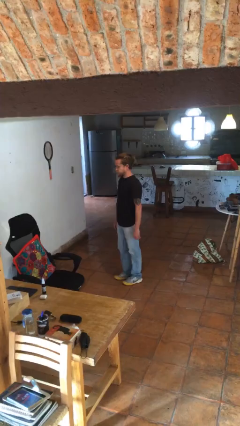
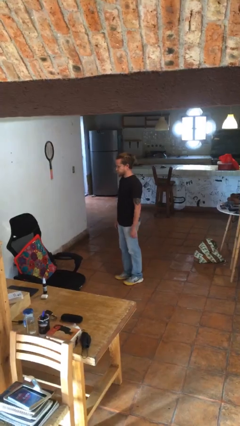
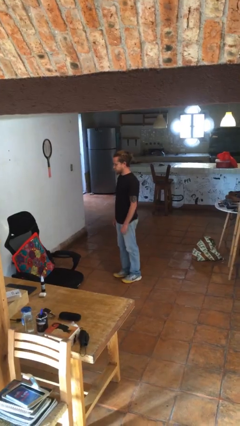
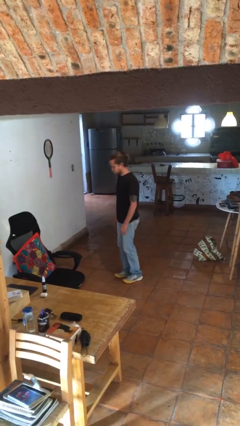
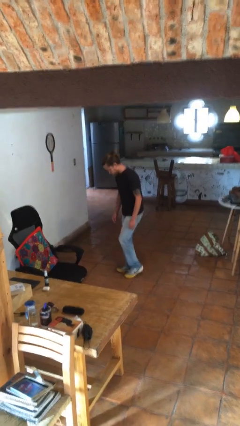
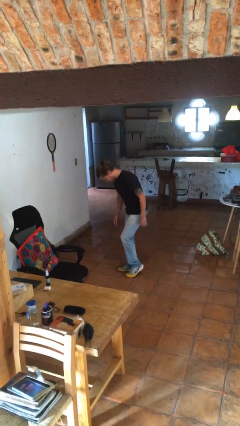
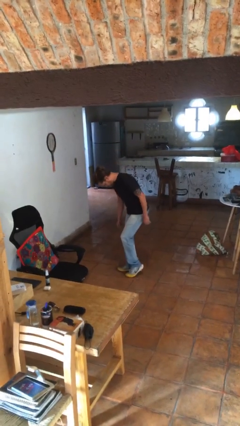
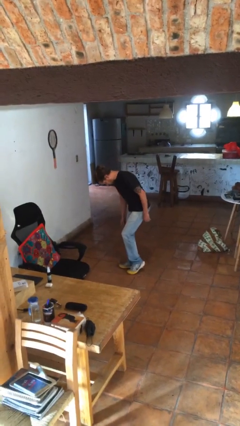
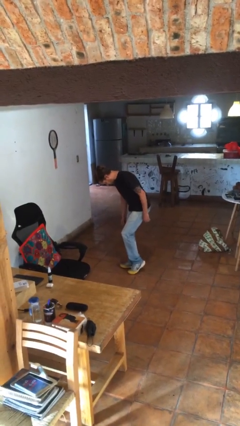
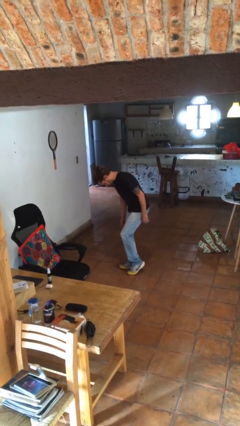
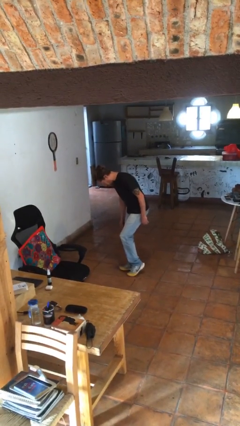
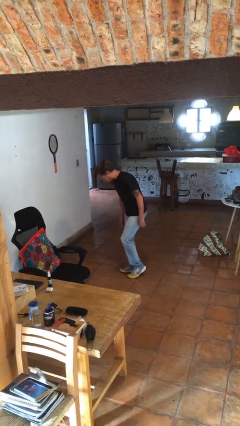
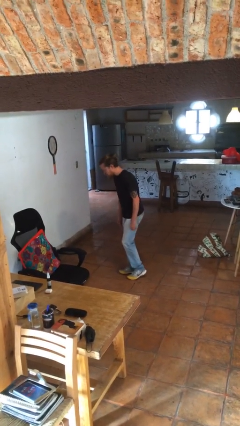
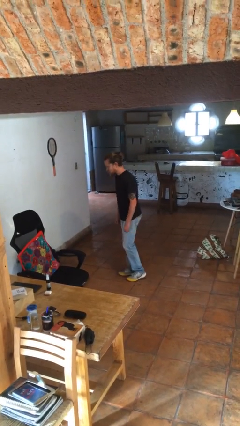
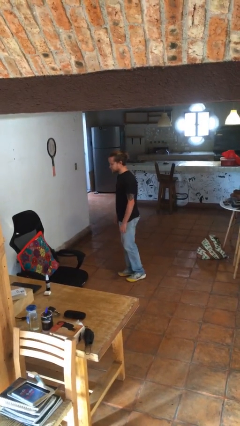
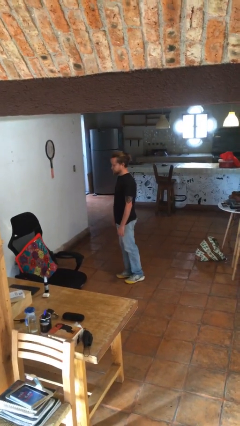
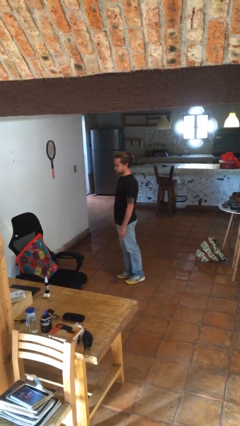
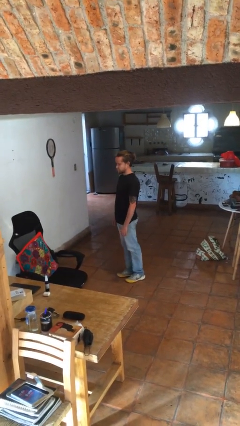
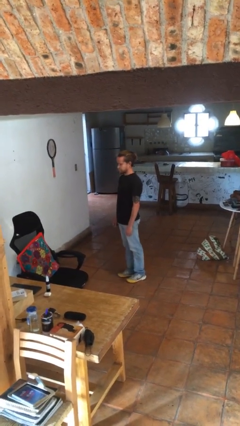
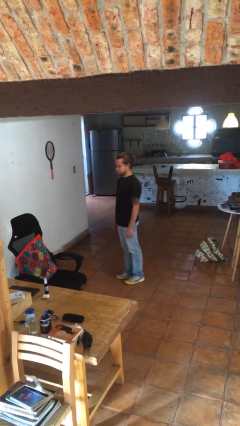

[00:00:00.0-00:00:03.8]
person bows

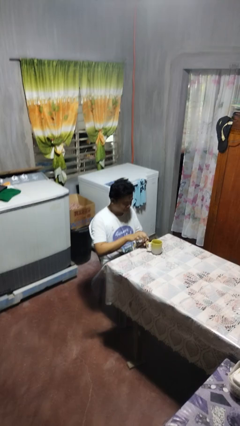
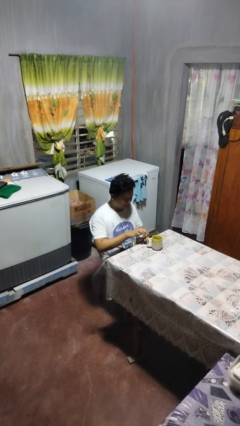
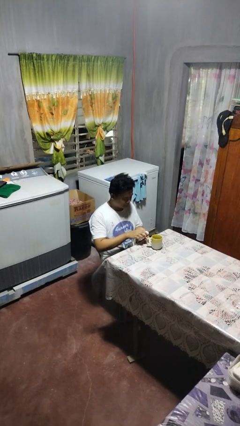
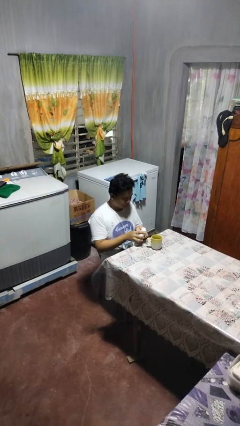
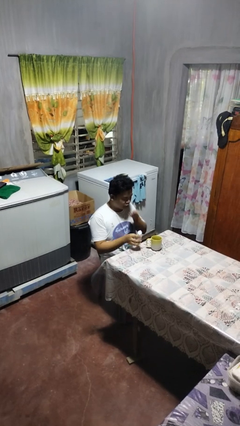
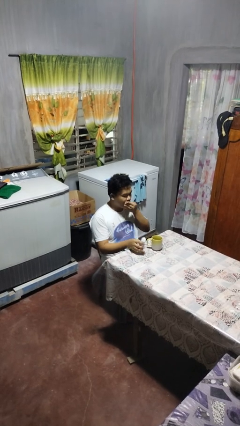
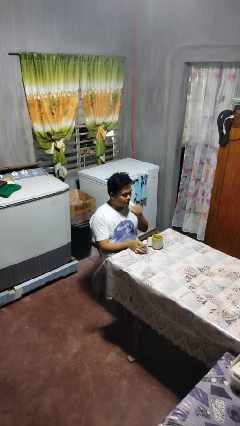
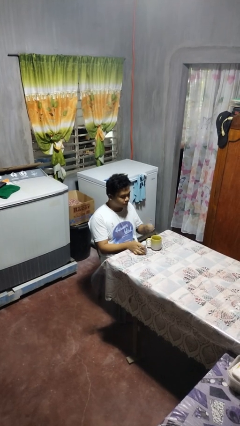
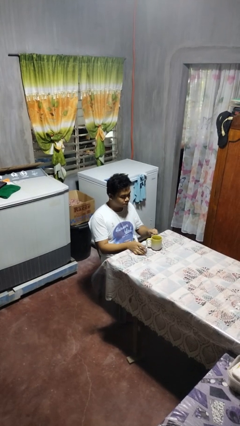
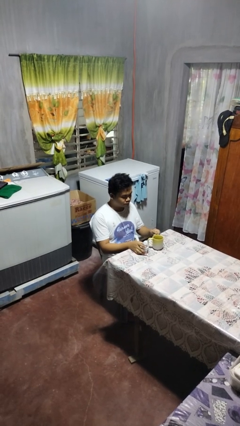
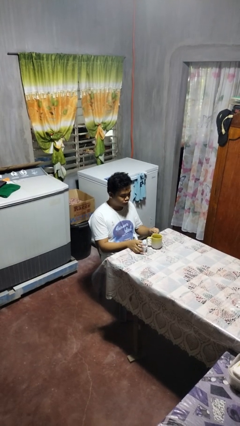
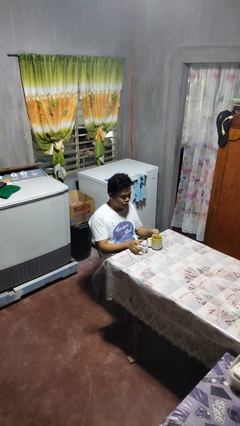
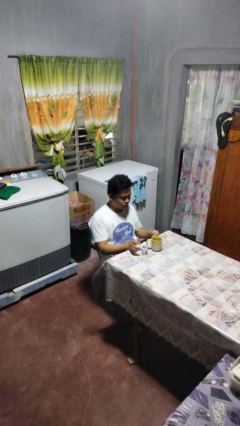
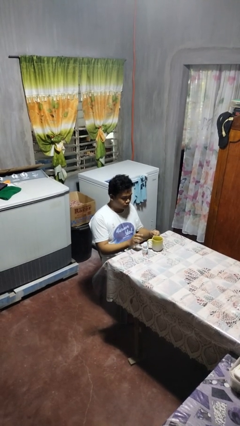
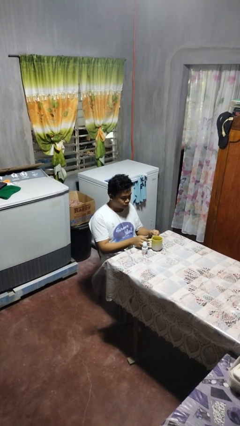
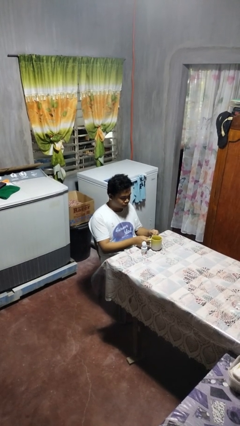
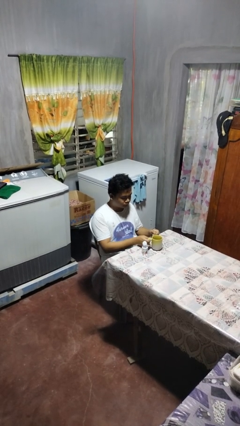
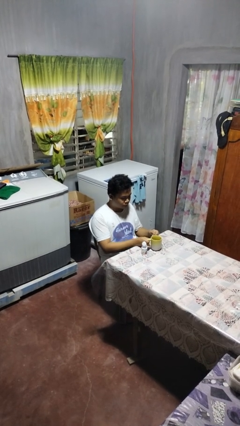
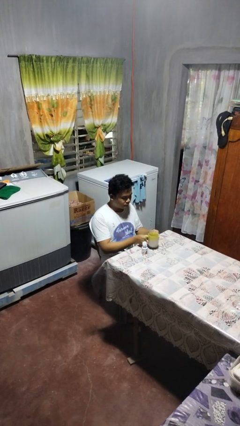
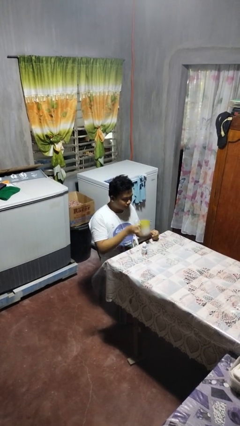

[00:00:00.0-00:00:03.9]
person takes medicine pills

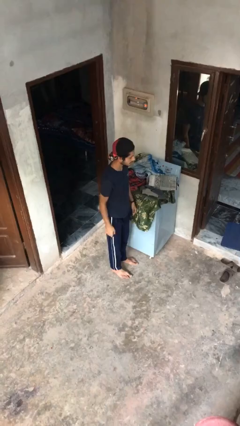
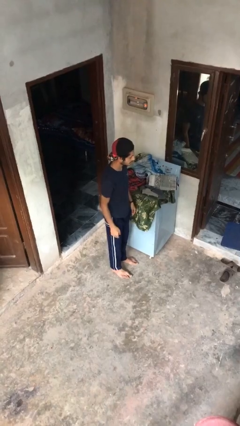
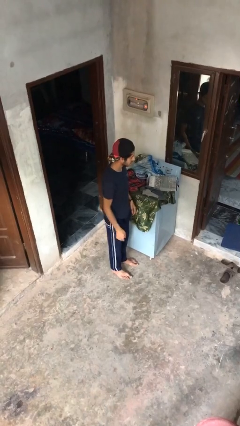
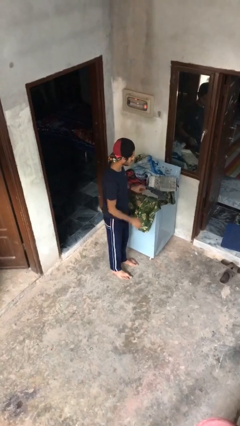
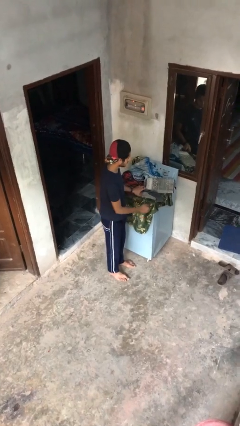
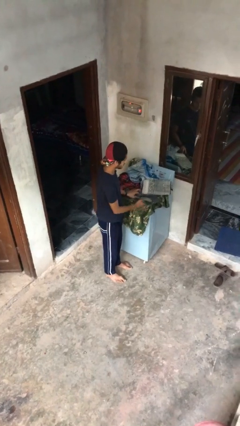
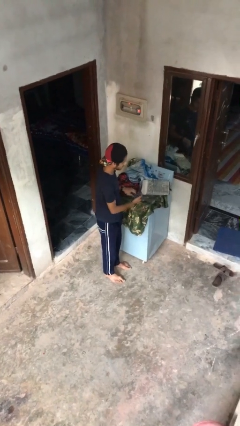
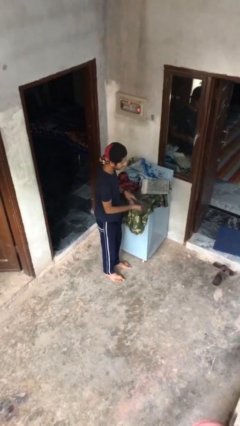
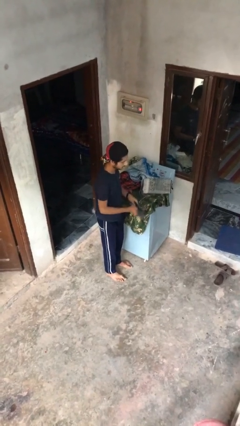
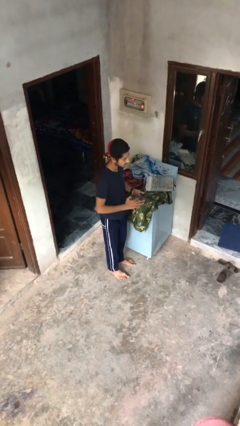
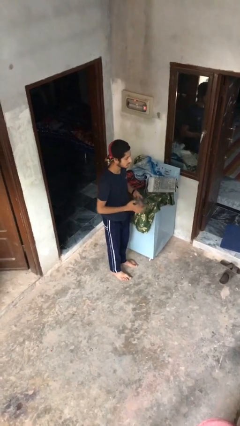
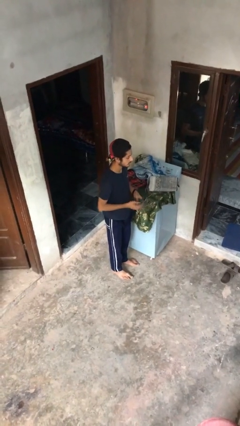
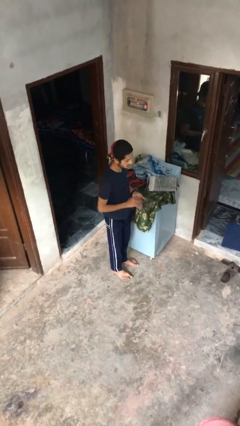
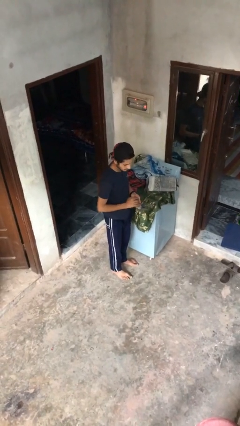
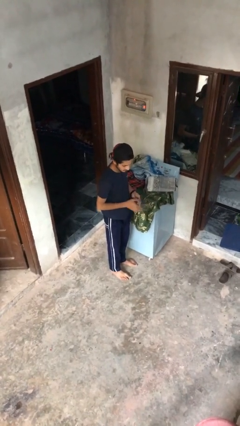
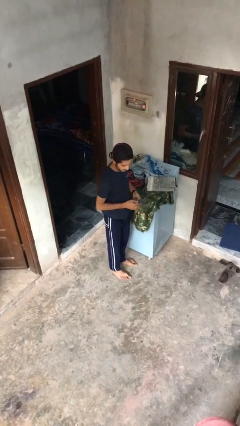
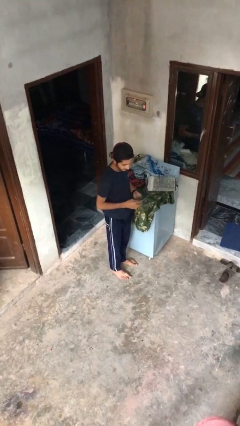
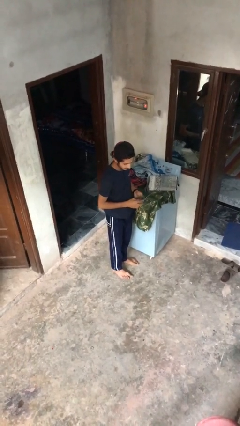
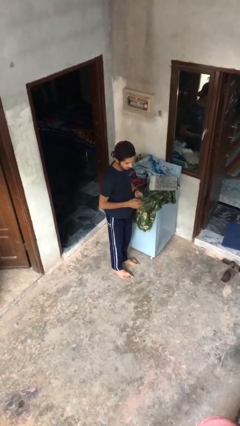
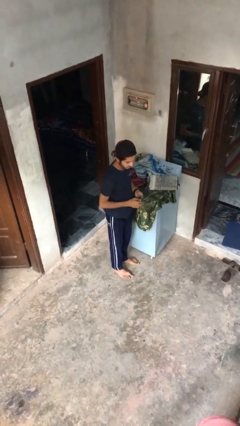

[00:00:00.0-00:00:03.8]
person folds socks

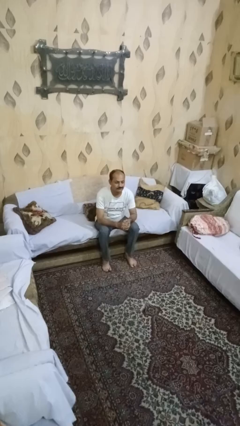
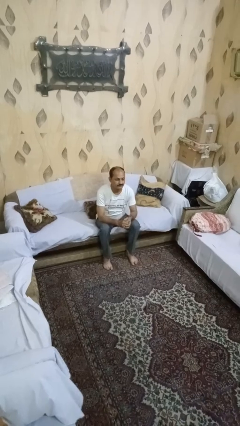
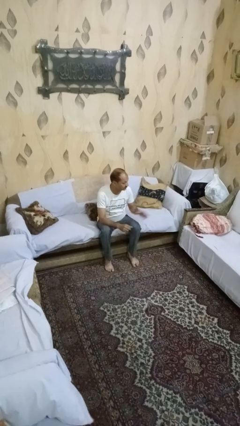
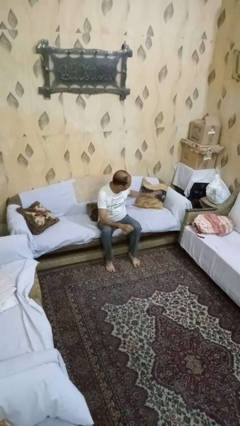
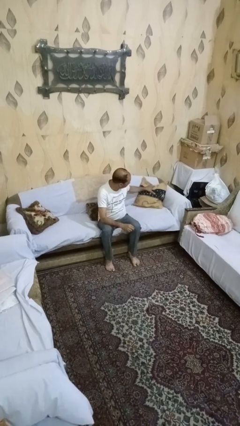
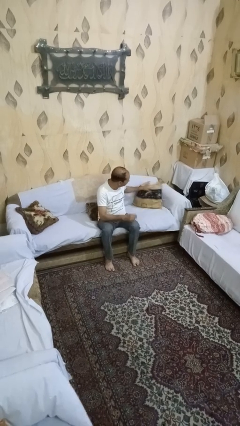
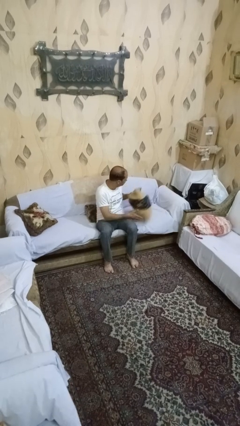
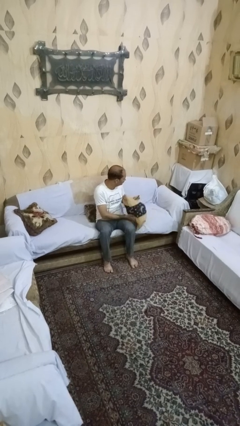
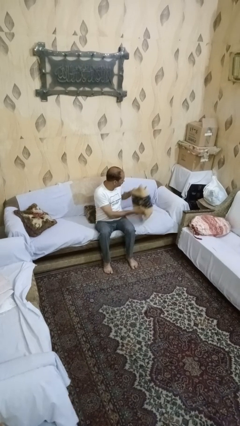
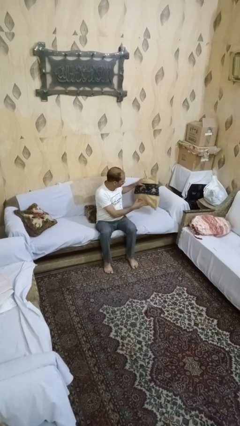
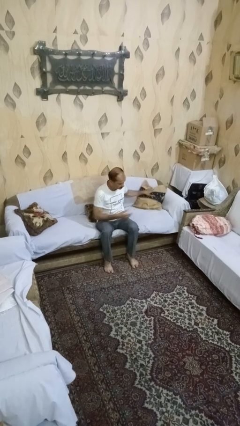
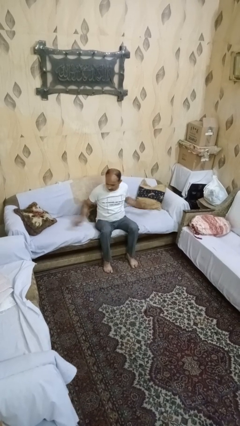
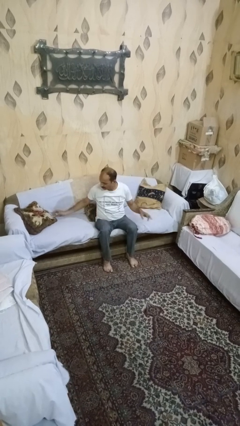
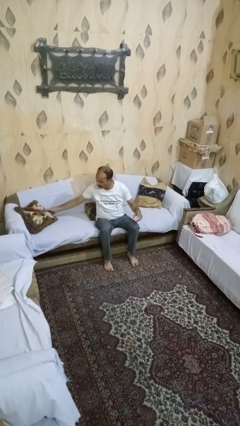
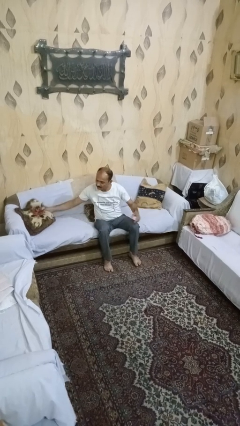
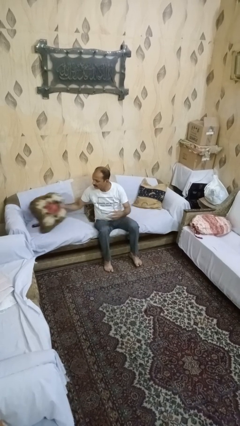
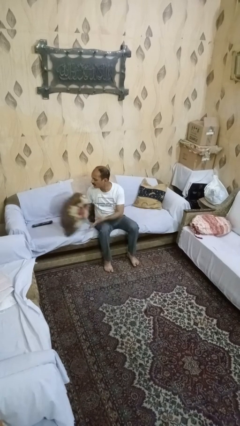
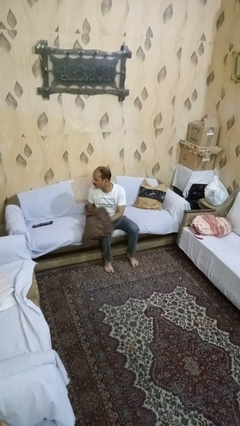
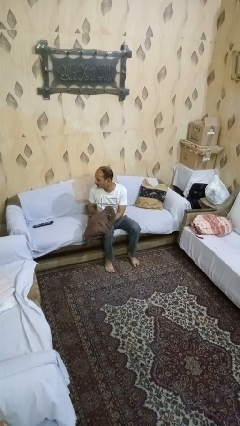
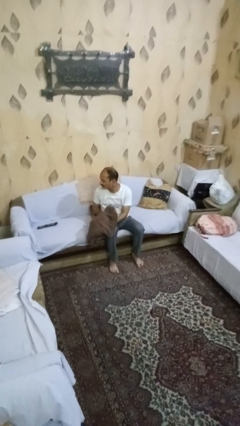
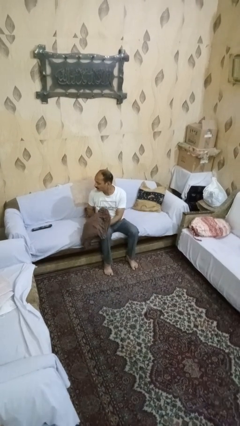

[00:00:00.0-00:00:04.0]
person searches in couch

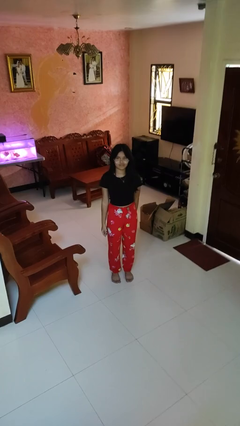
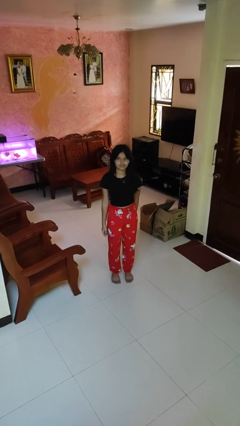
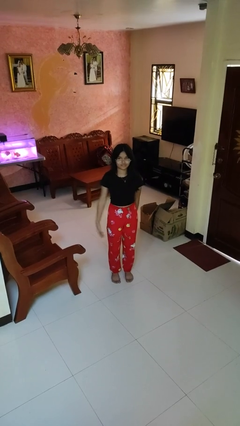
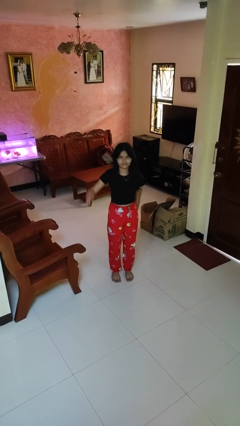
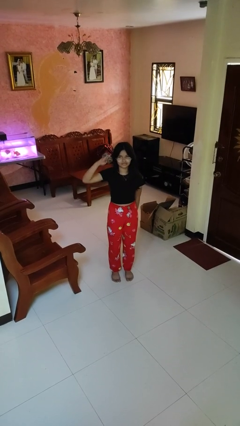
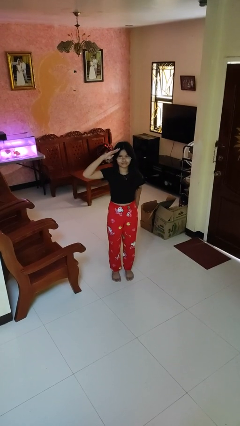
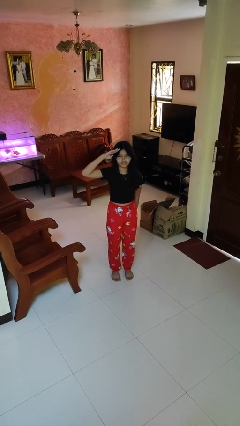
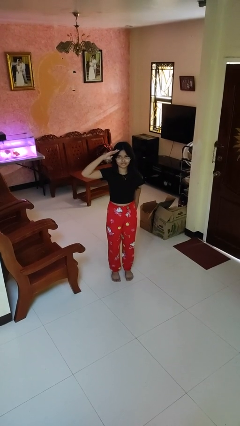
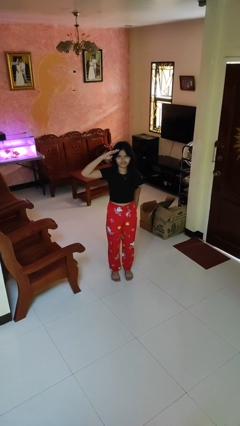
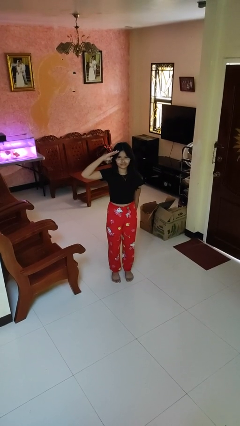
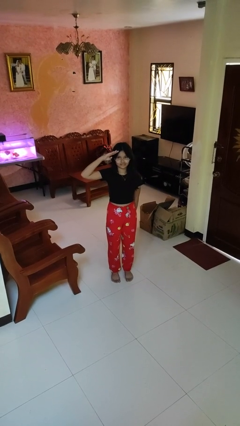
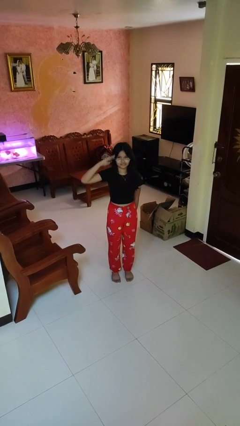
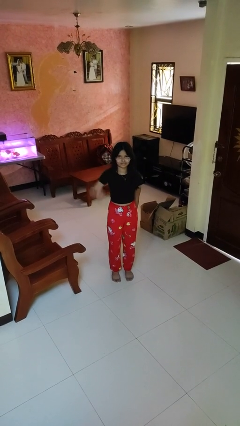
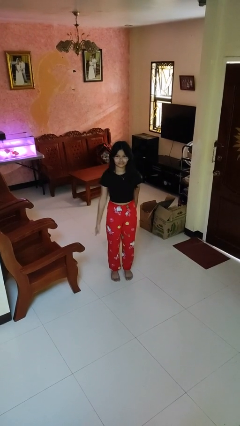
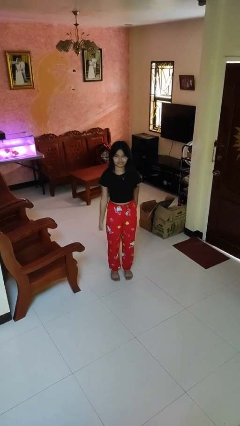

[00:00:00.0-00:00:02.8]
person salutes
